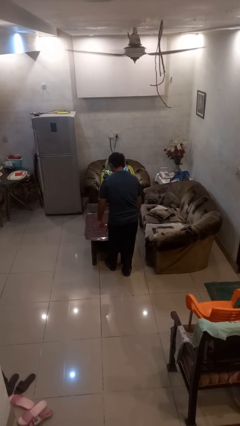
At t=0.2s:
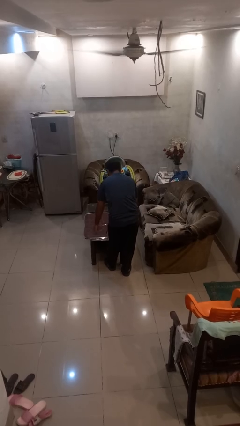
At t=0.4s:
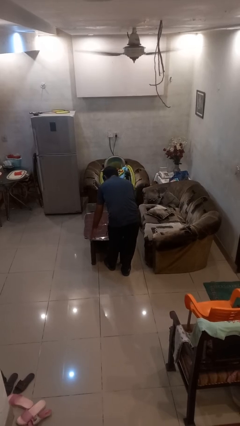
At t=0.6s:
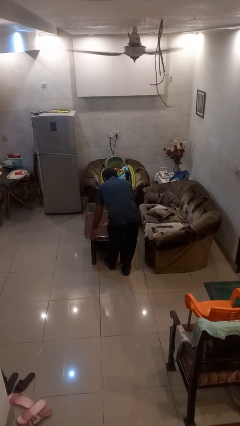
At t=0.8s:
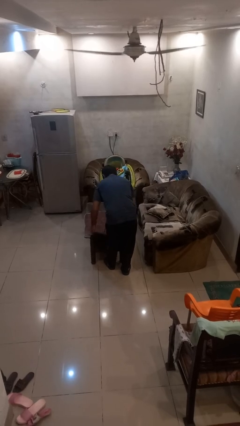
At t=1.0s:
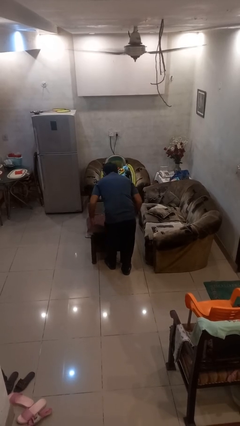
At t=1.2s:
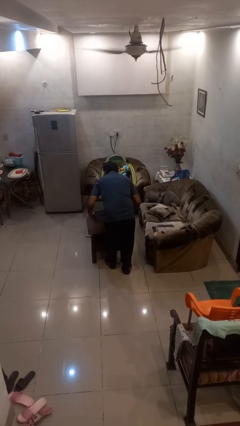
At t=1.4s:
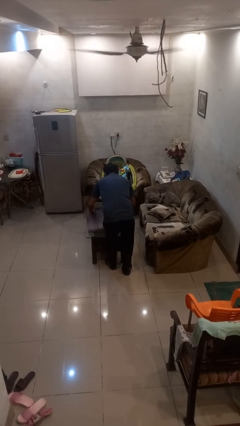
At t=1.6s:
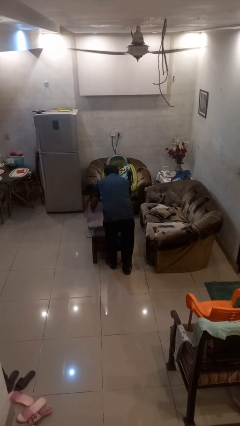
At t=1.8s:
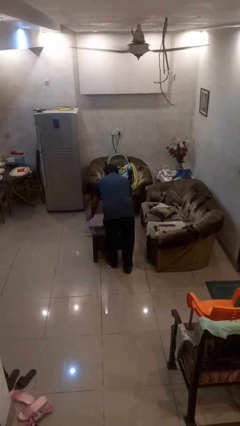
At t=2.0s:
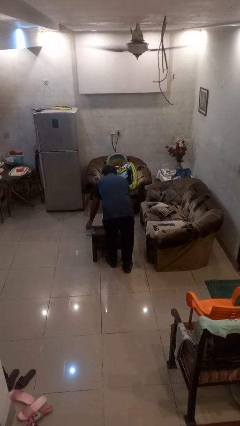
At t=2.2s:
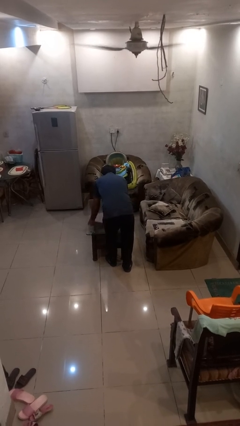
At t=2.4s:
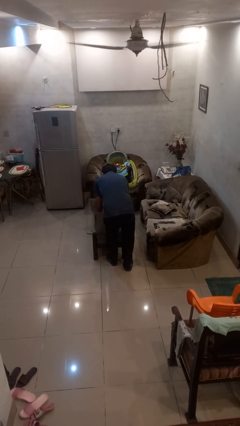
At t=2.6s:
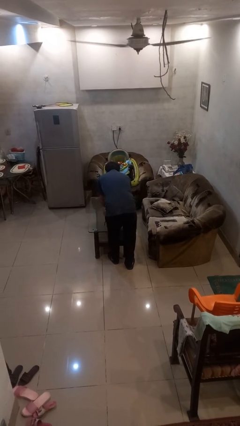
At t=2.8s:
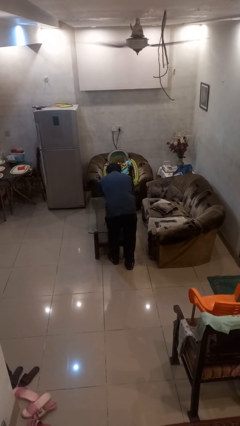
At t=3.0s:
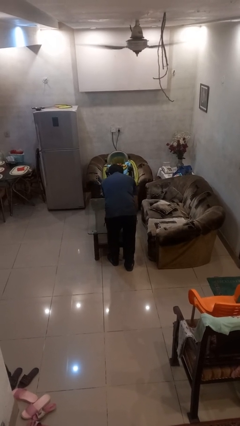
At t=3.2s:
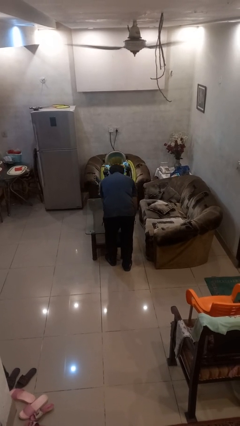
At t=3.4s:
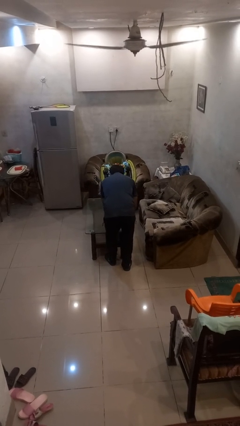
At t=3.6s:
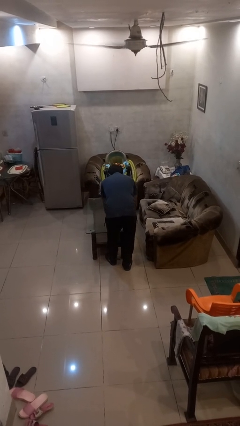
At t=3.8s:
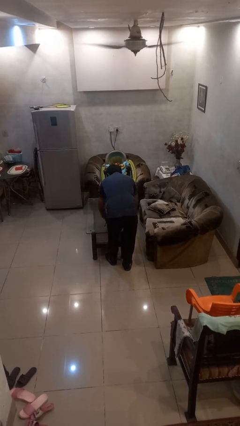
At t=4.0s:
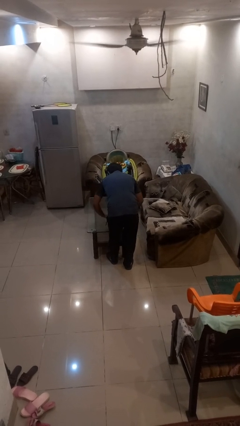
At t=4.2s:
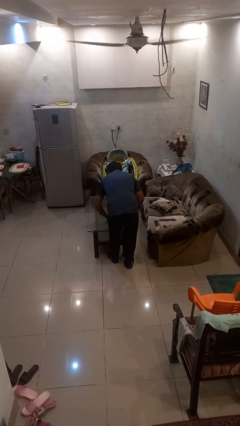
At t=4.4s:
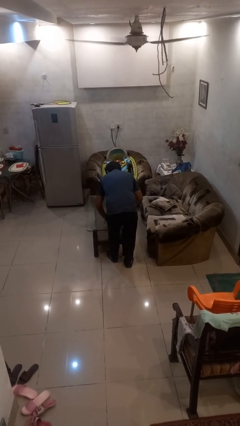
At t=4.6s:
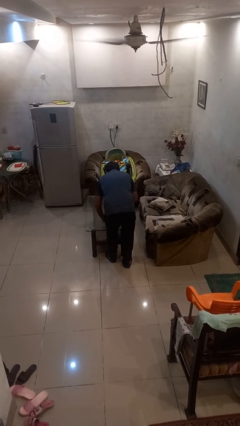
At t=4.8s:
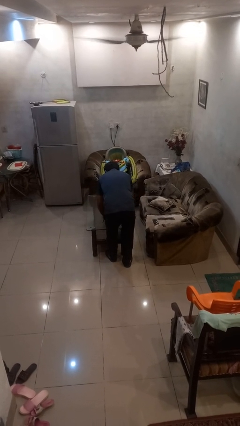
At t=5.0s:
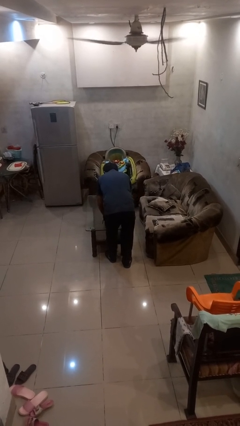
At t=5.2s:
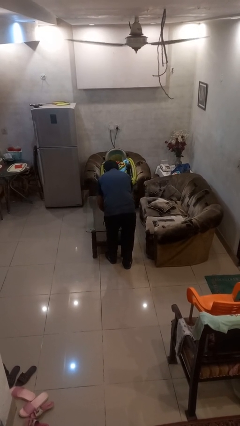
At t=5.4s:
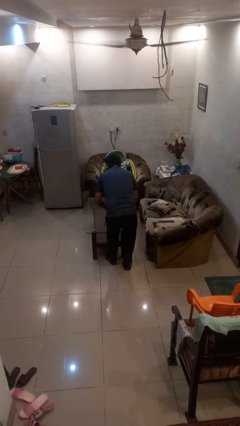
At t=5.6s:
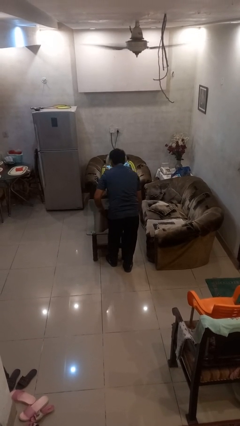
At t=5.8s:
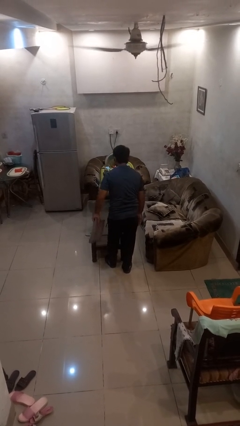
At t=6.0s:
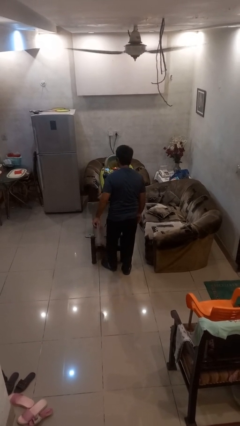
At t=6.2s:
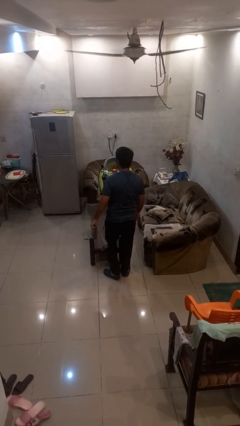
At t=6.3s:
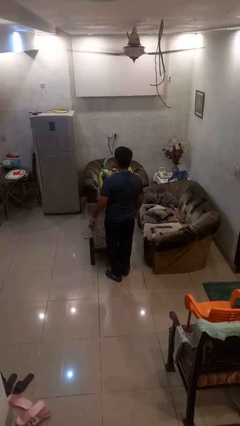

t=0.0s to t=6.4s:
person folds tablecloth

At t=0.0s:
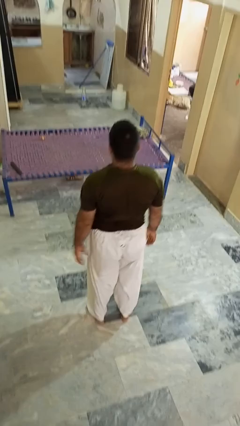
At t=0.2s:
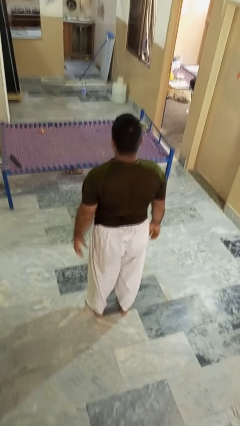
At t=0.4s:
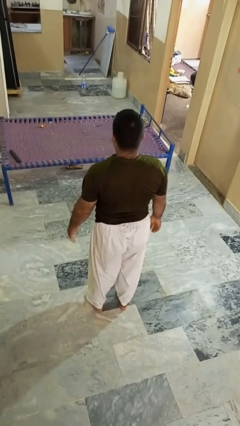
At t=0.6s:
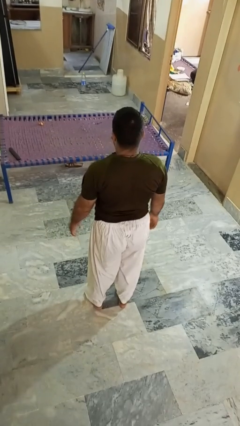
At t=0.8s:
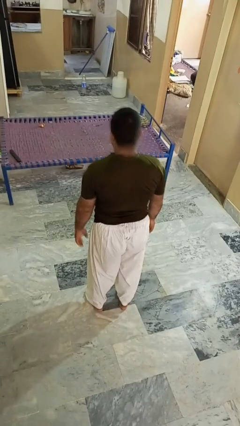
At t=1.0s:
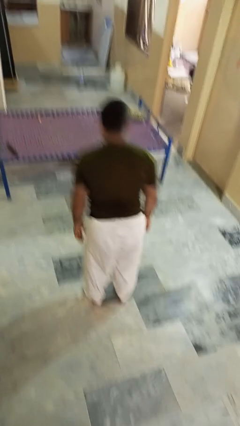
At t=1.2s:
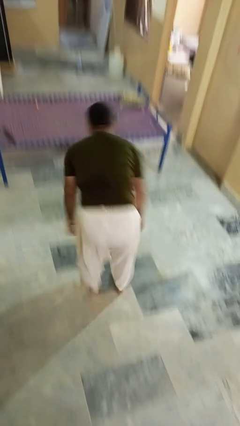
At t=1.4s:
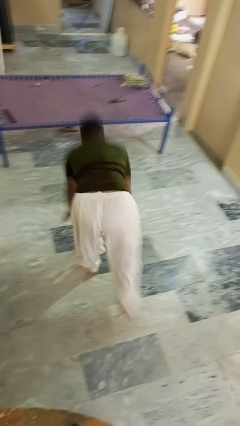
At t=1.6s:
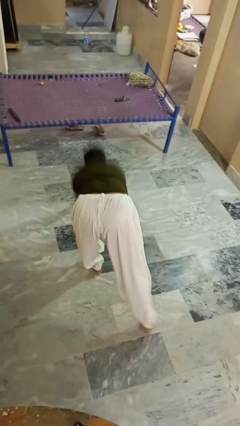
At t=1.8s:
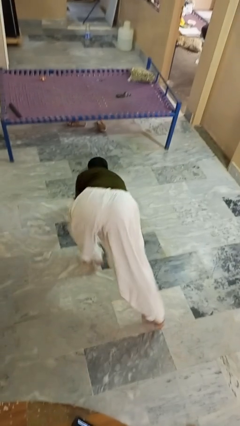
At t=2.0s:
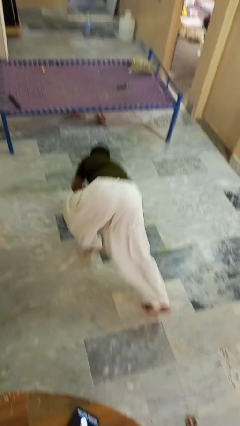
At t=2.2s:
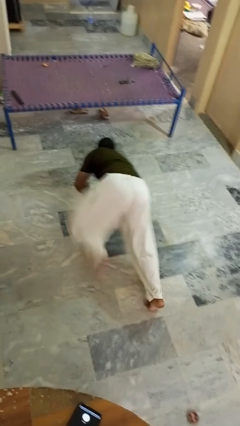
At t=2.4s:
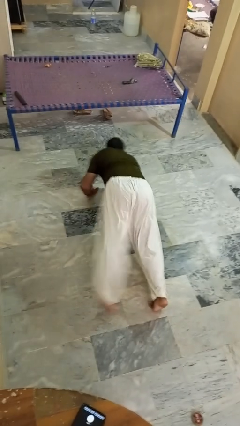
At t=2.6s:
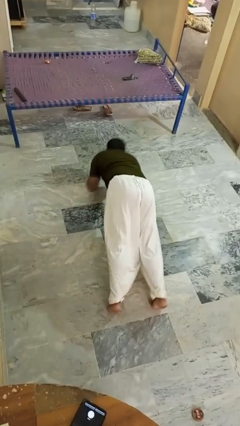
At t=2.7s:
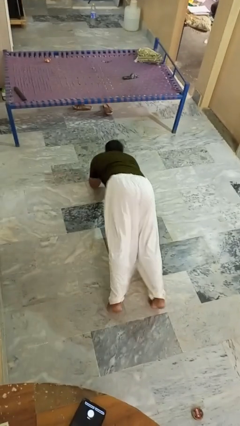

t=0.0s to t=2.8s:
person exercises with plank

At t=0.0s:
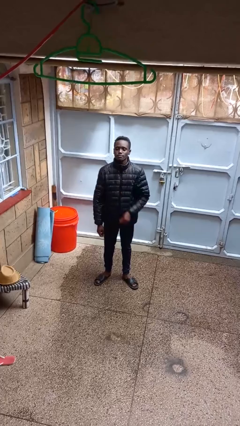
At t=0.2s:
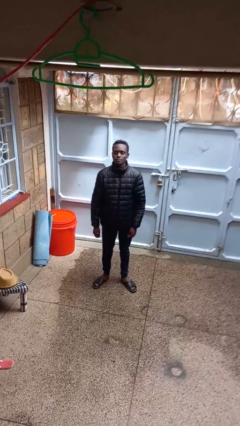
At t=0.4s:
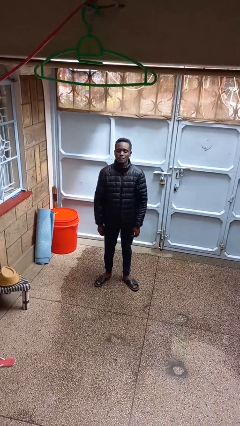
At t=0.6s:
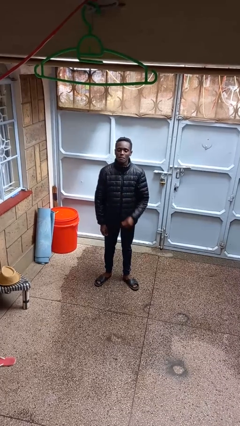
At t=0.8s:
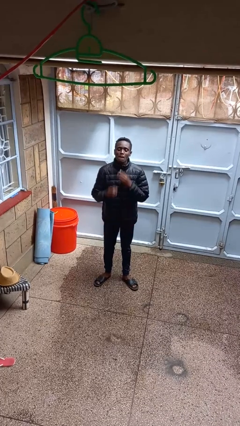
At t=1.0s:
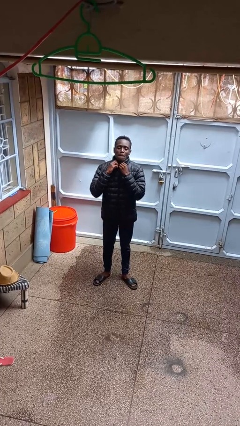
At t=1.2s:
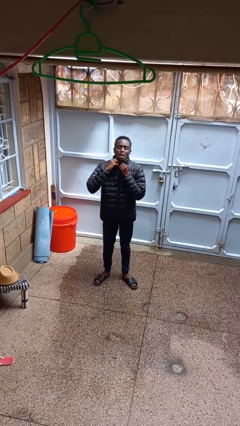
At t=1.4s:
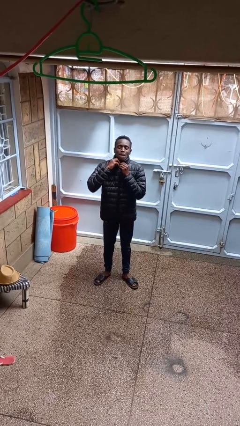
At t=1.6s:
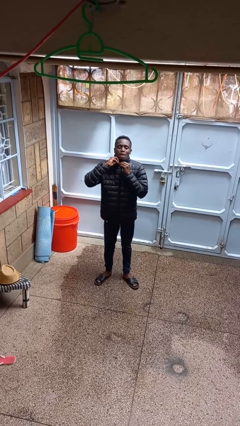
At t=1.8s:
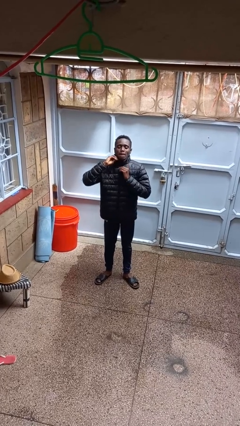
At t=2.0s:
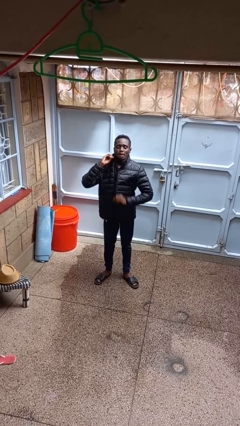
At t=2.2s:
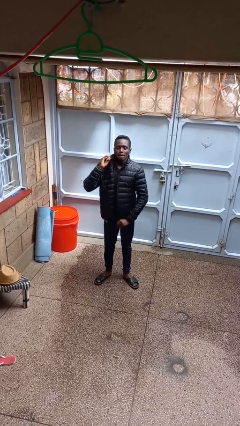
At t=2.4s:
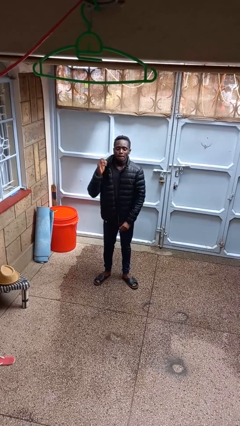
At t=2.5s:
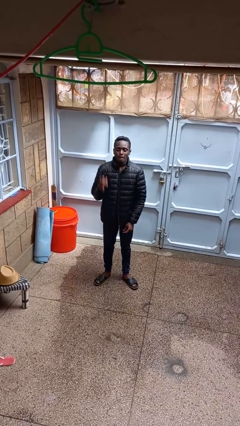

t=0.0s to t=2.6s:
person unzips jacket

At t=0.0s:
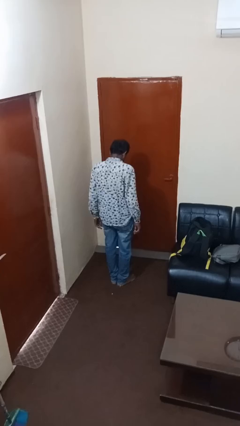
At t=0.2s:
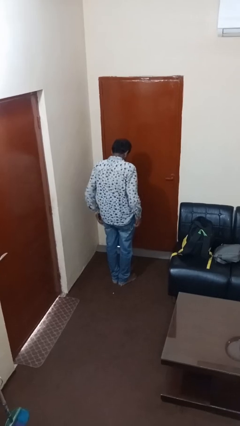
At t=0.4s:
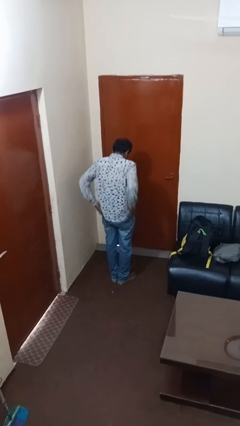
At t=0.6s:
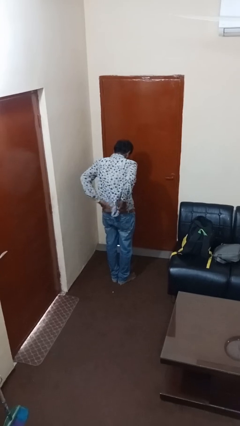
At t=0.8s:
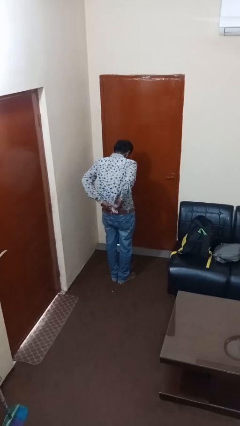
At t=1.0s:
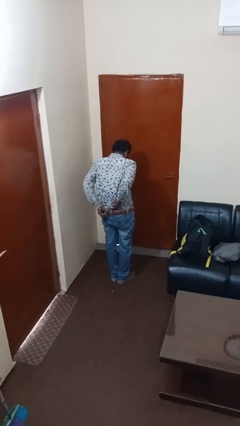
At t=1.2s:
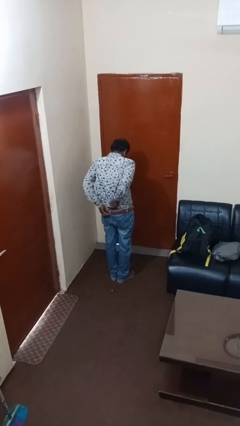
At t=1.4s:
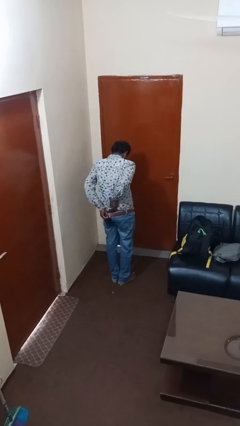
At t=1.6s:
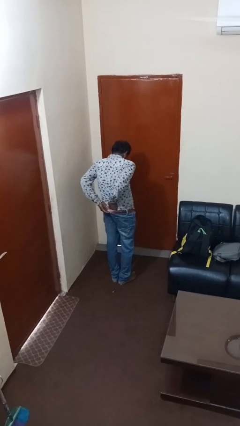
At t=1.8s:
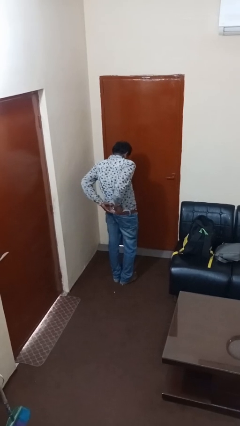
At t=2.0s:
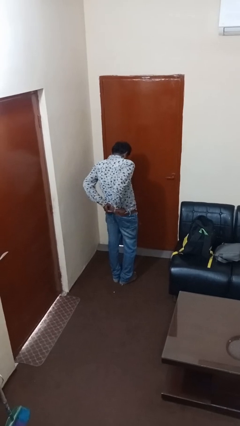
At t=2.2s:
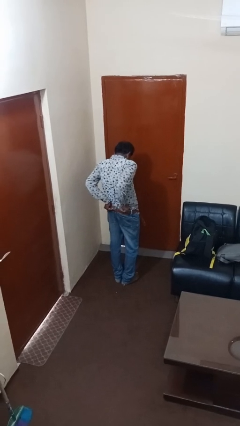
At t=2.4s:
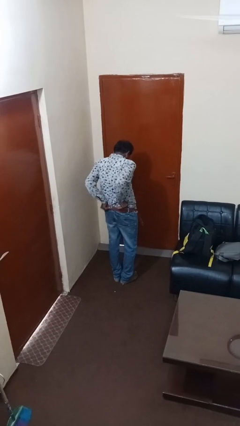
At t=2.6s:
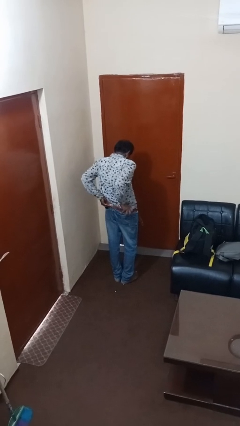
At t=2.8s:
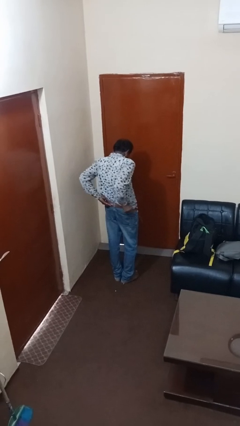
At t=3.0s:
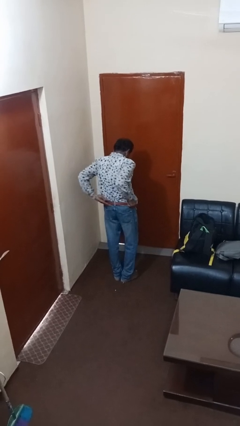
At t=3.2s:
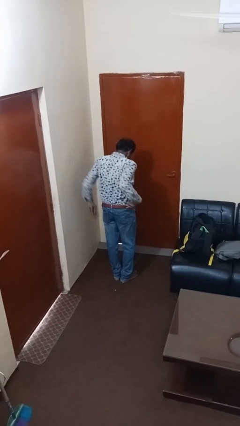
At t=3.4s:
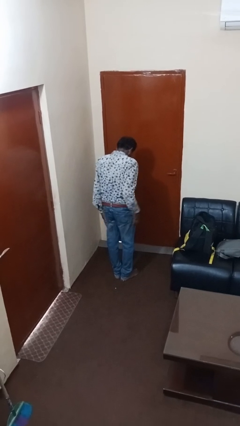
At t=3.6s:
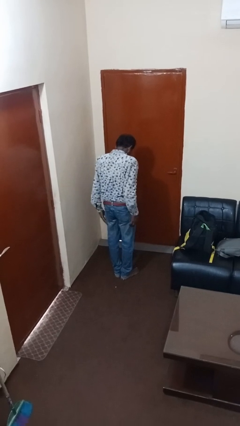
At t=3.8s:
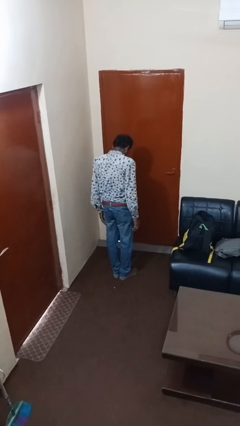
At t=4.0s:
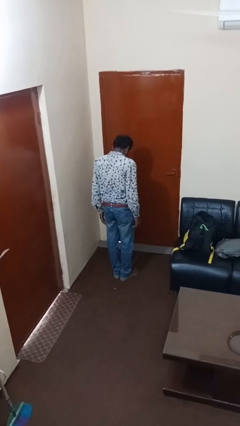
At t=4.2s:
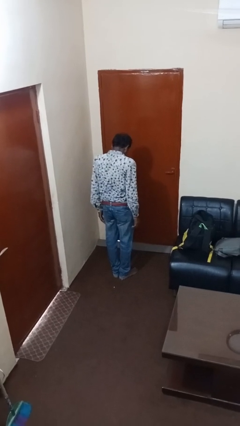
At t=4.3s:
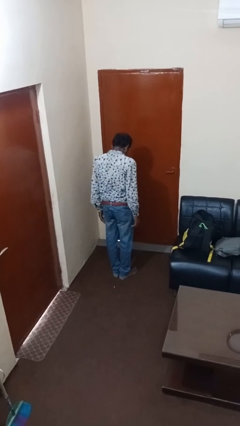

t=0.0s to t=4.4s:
person tucks in shirt

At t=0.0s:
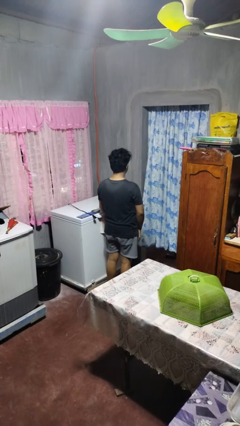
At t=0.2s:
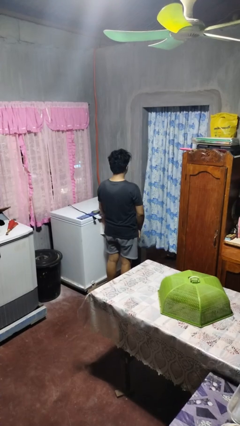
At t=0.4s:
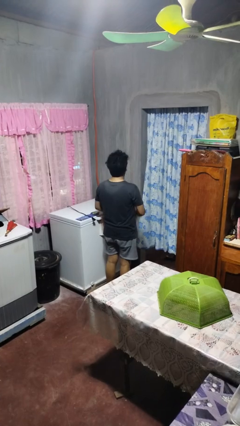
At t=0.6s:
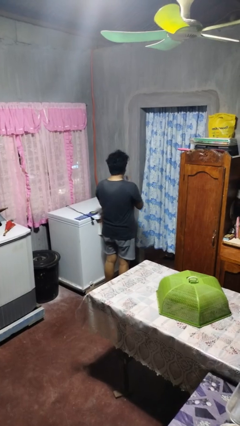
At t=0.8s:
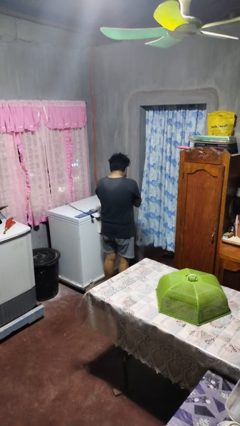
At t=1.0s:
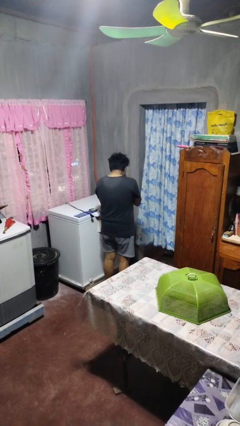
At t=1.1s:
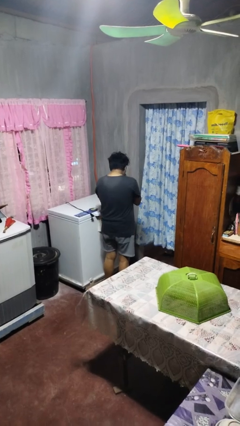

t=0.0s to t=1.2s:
person sneezes into hand

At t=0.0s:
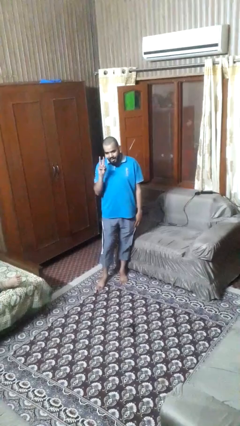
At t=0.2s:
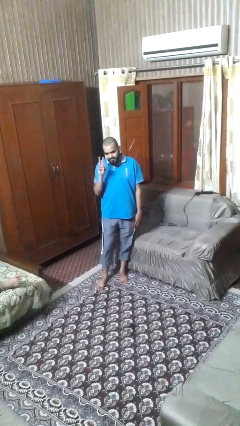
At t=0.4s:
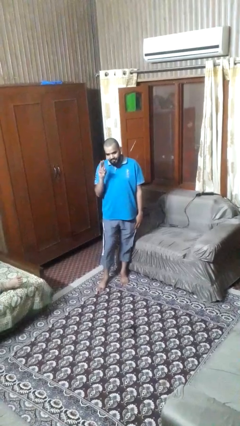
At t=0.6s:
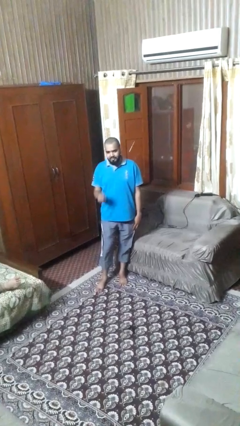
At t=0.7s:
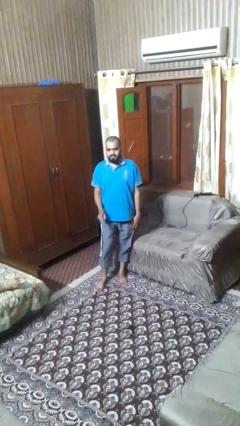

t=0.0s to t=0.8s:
person gestures peace
